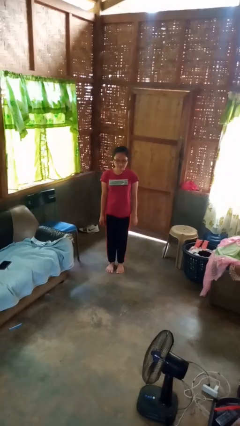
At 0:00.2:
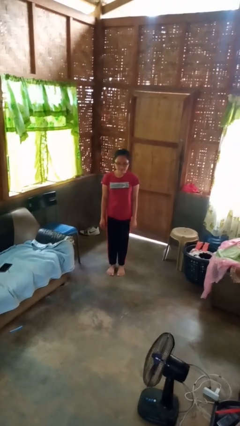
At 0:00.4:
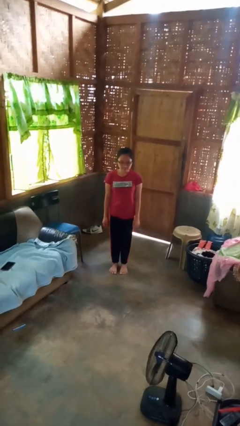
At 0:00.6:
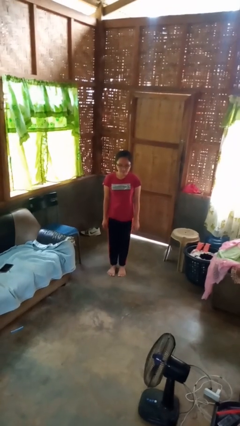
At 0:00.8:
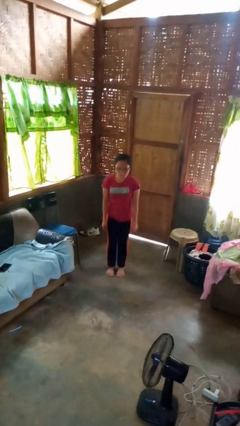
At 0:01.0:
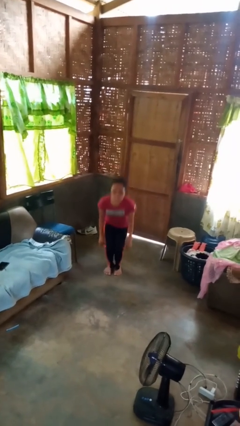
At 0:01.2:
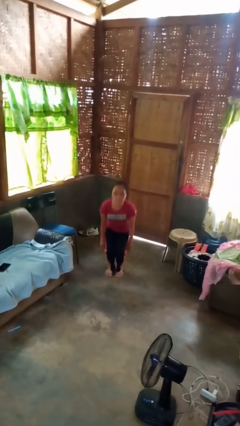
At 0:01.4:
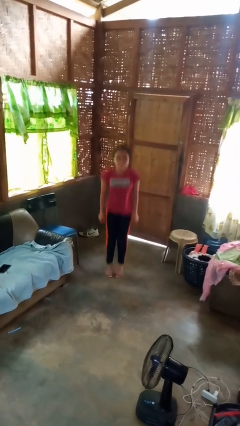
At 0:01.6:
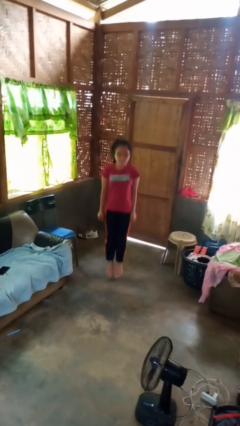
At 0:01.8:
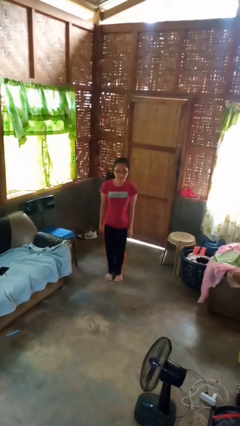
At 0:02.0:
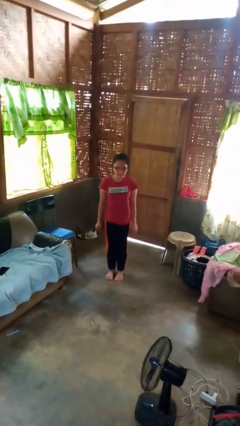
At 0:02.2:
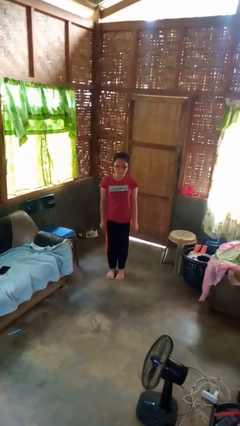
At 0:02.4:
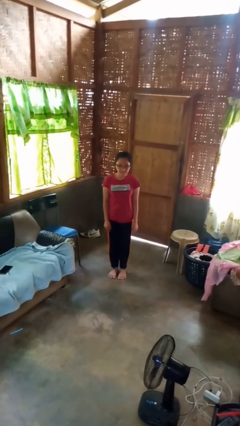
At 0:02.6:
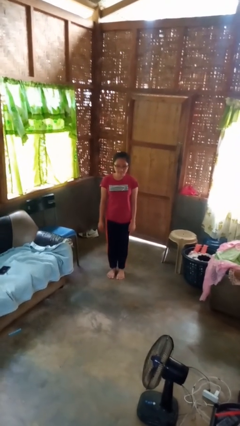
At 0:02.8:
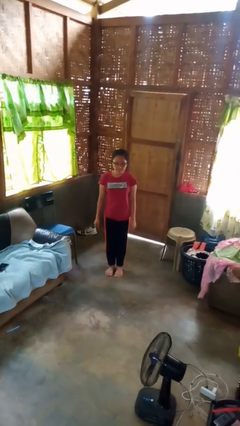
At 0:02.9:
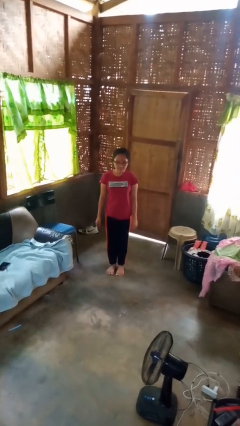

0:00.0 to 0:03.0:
person jumps

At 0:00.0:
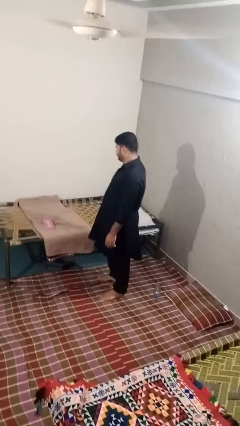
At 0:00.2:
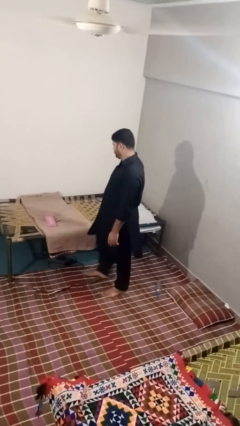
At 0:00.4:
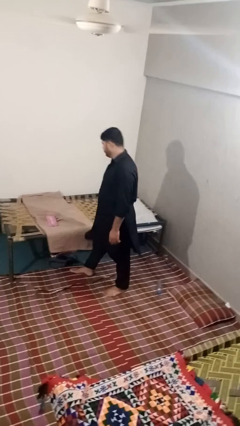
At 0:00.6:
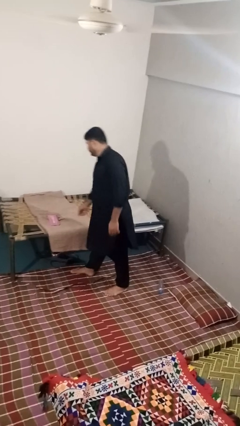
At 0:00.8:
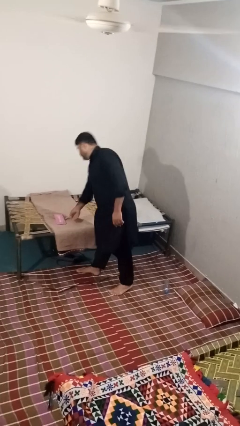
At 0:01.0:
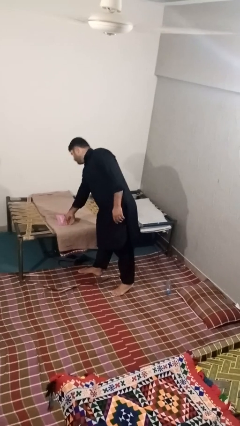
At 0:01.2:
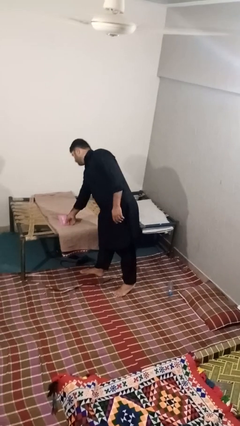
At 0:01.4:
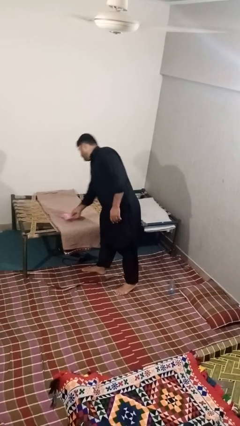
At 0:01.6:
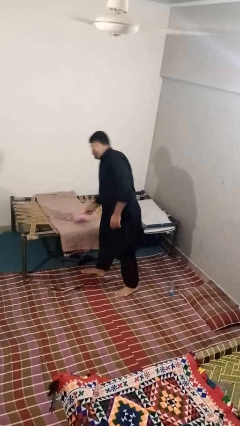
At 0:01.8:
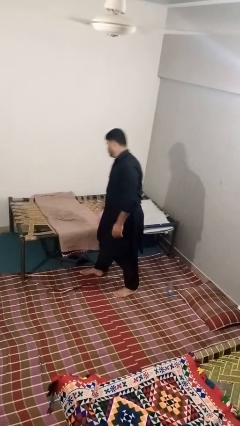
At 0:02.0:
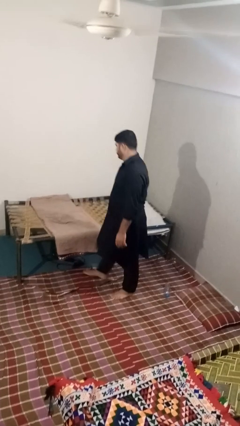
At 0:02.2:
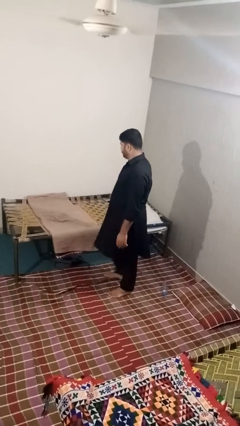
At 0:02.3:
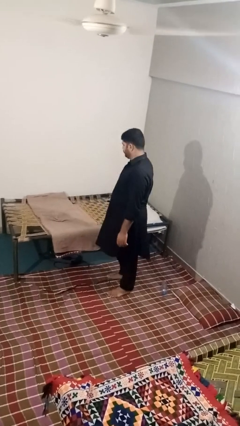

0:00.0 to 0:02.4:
person picks up object from bed

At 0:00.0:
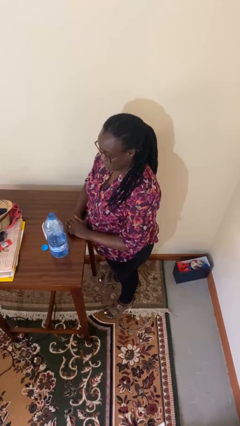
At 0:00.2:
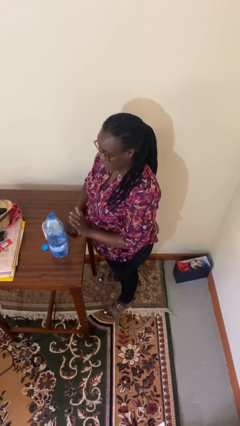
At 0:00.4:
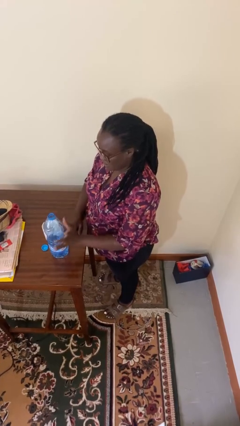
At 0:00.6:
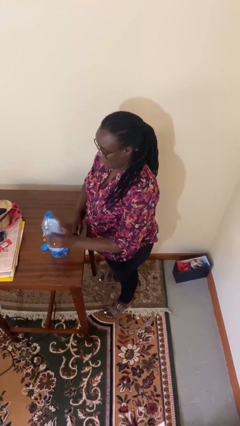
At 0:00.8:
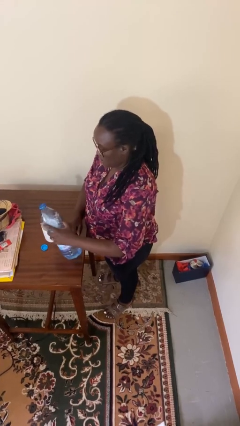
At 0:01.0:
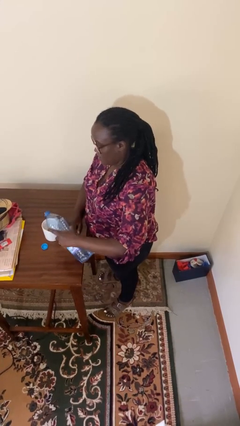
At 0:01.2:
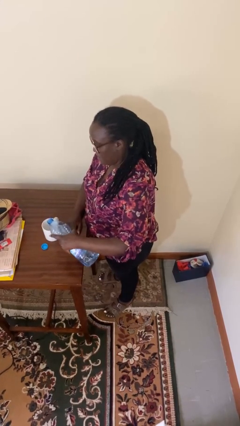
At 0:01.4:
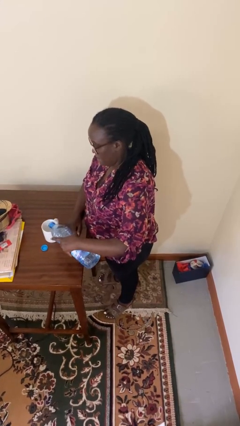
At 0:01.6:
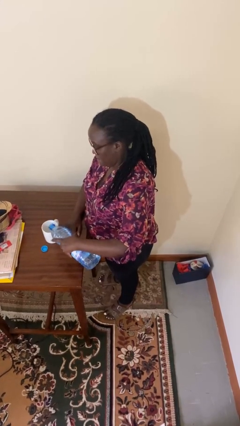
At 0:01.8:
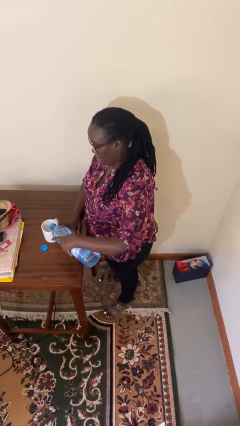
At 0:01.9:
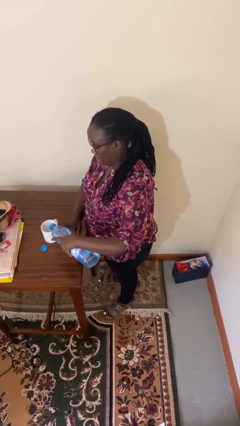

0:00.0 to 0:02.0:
person pours liquid into cup

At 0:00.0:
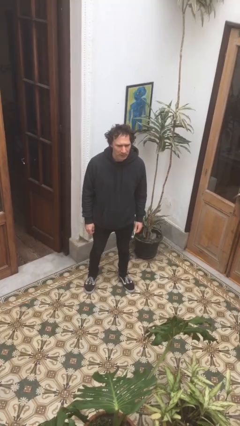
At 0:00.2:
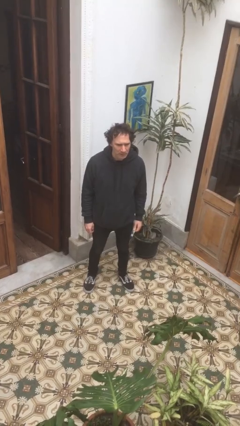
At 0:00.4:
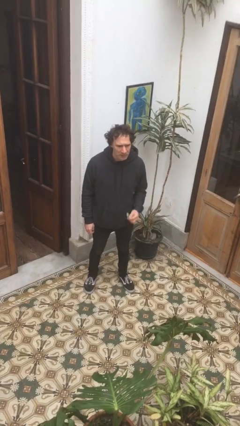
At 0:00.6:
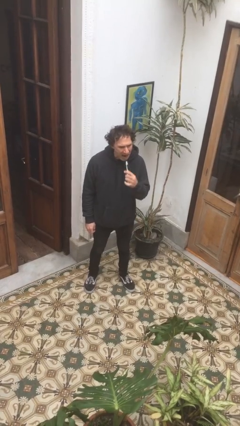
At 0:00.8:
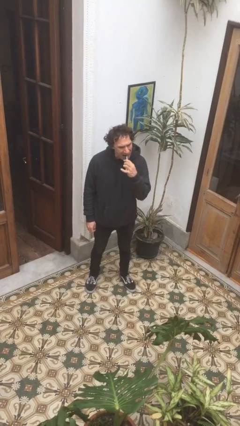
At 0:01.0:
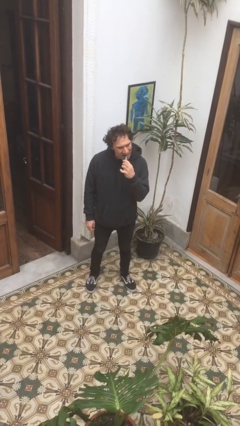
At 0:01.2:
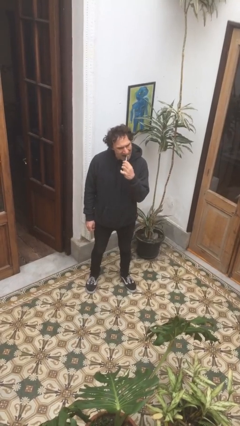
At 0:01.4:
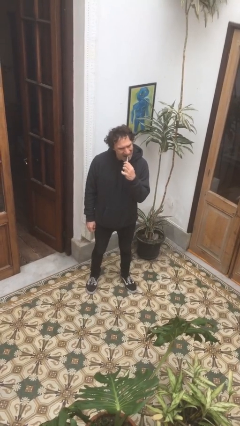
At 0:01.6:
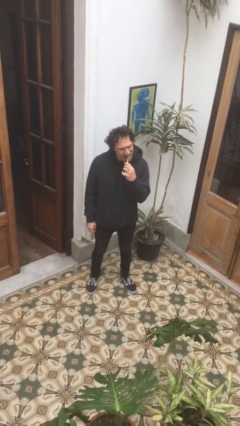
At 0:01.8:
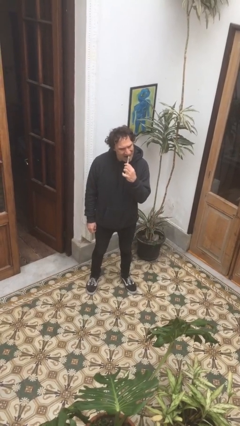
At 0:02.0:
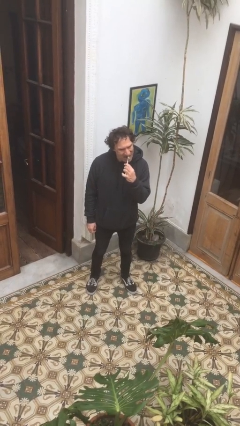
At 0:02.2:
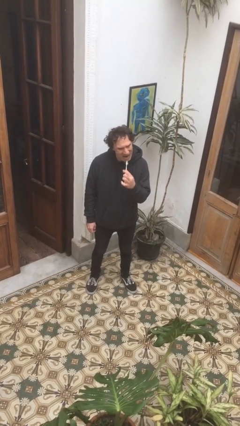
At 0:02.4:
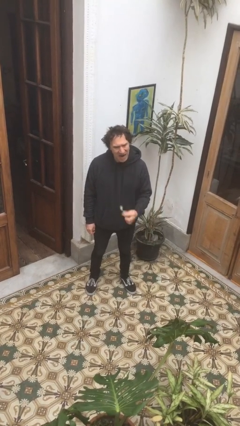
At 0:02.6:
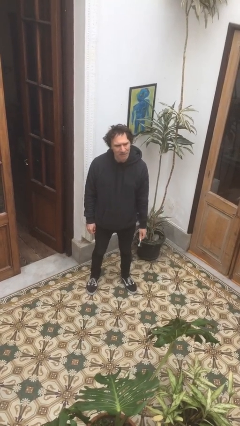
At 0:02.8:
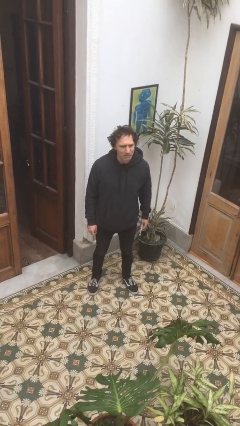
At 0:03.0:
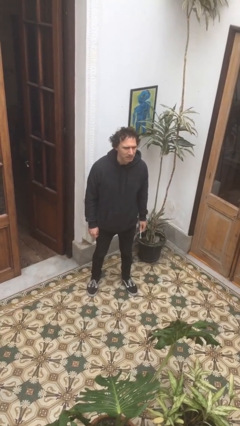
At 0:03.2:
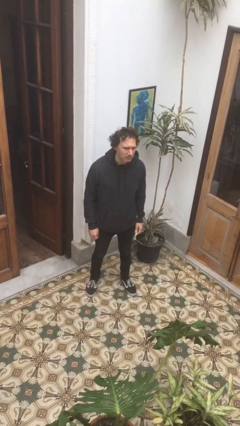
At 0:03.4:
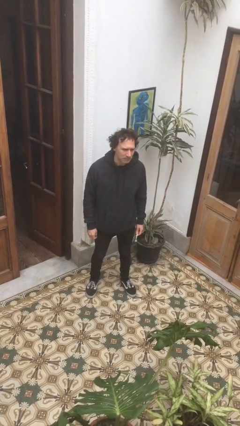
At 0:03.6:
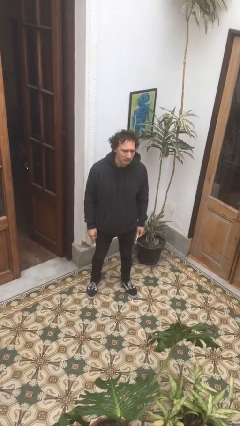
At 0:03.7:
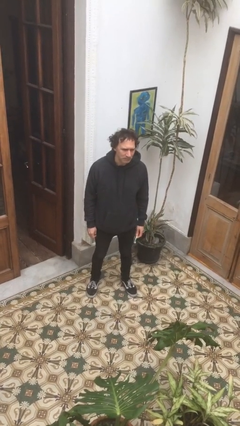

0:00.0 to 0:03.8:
person brushes teeth

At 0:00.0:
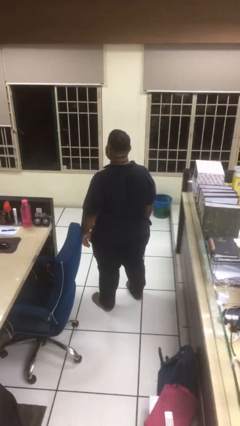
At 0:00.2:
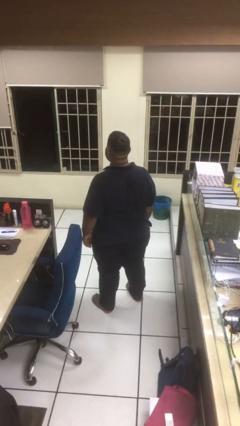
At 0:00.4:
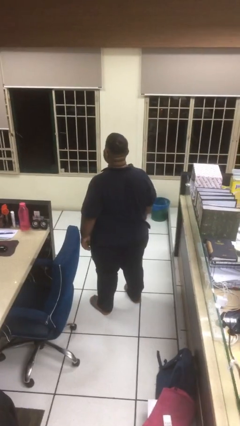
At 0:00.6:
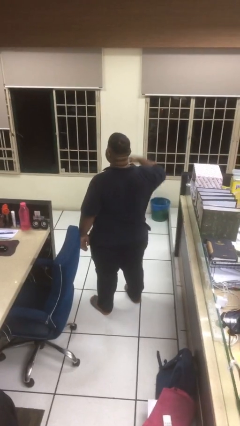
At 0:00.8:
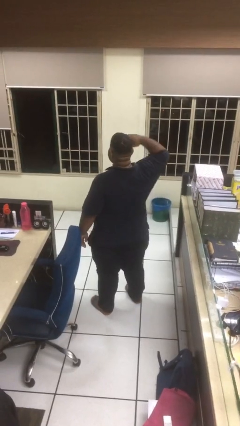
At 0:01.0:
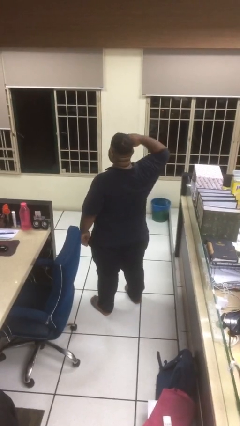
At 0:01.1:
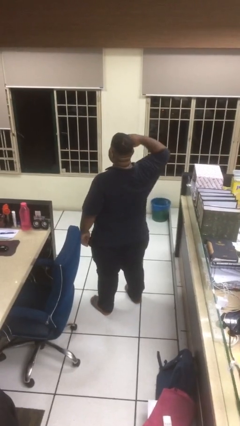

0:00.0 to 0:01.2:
person salutes

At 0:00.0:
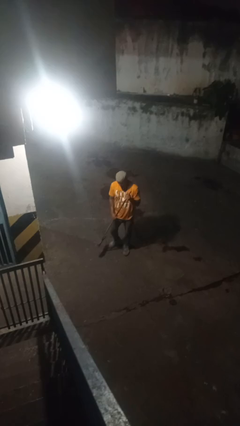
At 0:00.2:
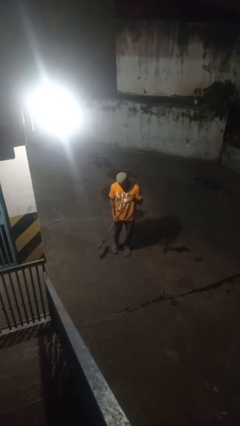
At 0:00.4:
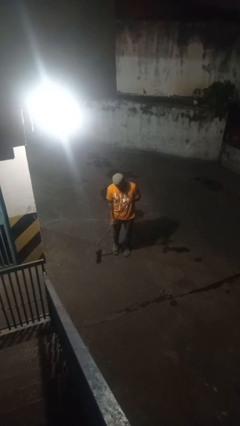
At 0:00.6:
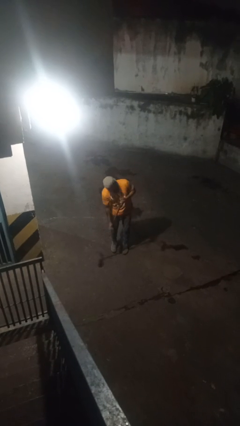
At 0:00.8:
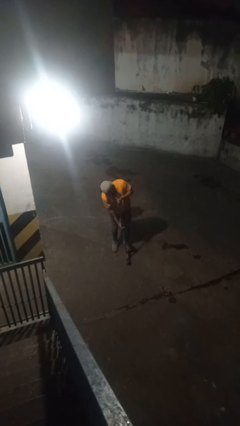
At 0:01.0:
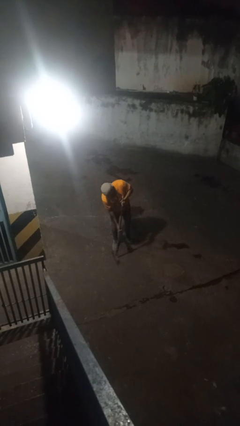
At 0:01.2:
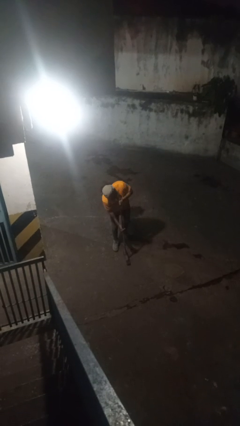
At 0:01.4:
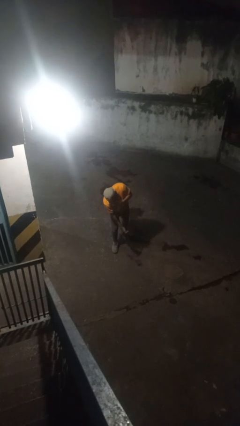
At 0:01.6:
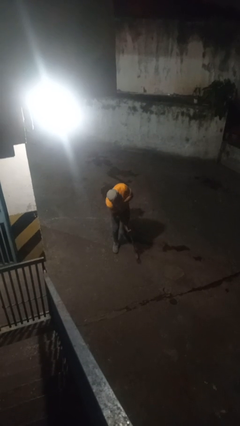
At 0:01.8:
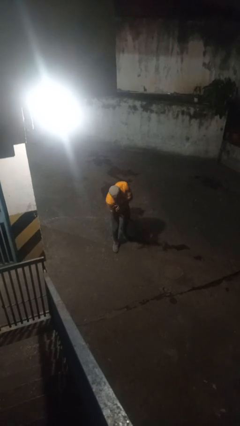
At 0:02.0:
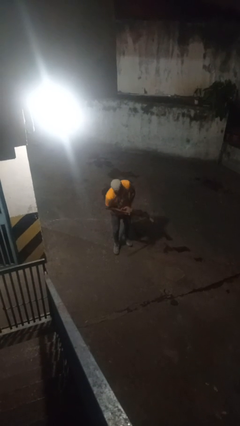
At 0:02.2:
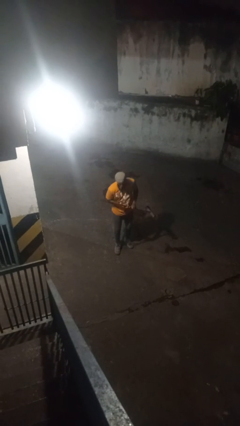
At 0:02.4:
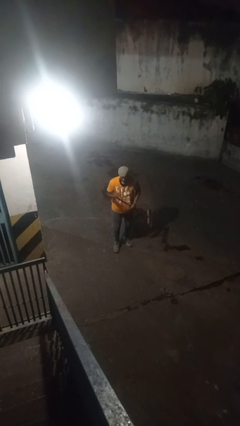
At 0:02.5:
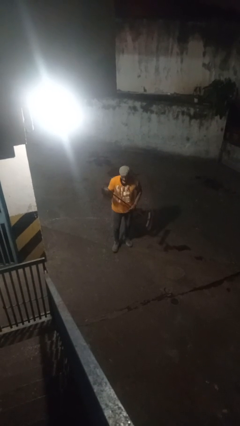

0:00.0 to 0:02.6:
person sweeps floor

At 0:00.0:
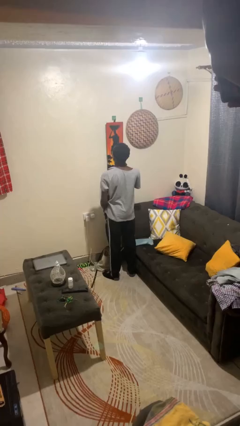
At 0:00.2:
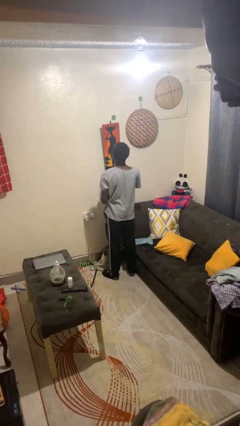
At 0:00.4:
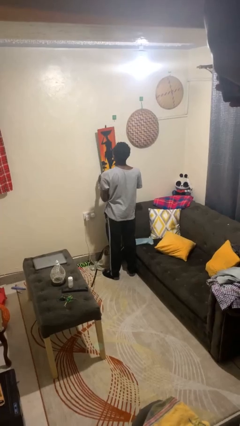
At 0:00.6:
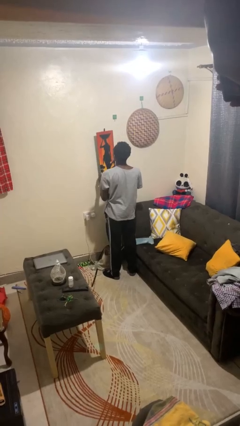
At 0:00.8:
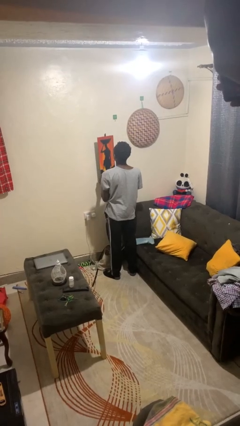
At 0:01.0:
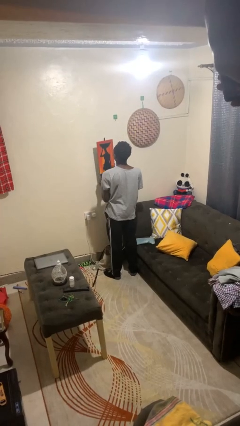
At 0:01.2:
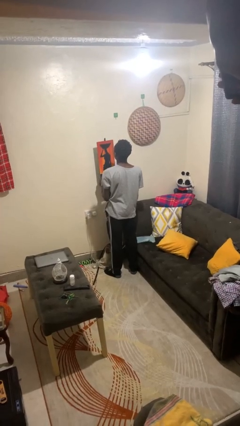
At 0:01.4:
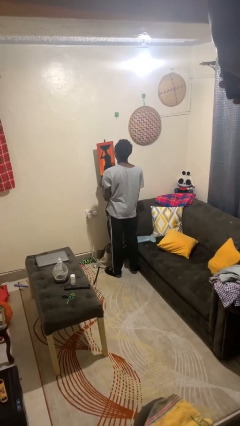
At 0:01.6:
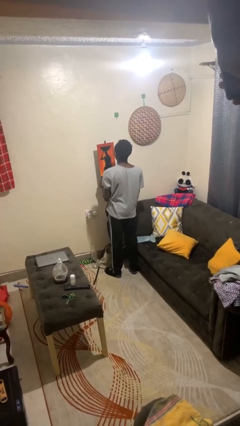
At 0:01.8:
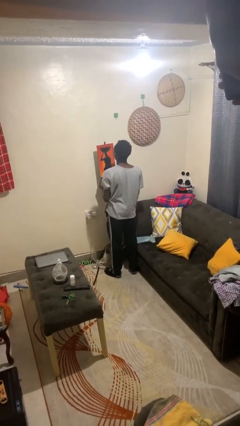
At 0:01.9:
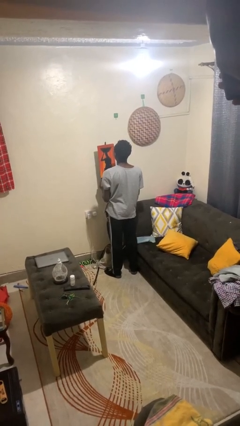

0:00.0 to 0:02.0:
person takes down picture frame
